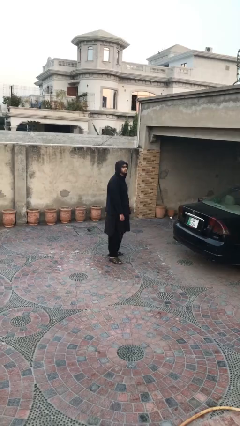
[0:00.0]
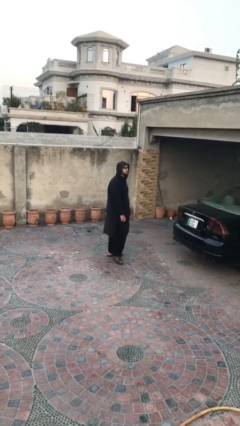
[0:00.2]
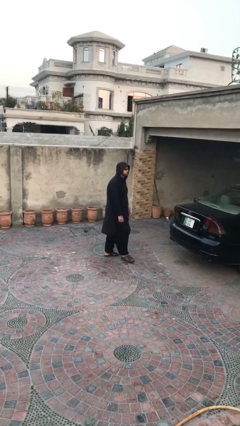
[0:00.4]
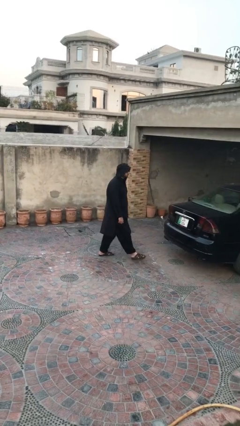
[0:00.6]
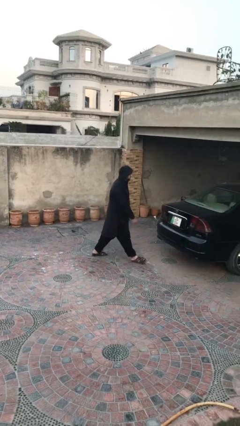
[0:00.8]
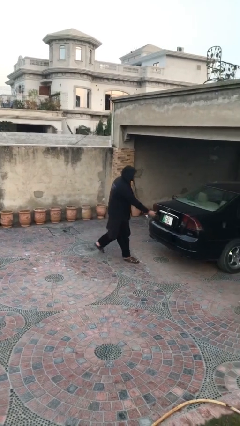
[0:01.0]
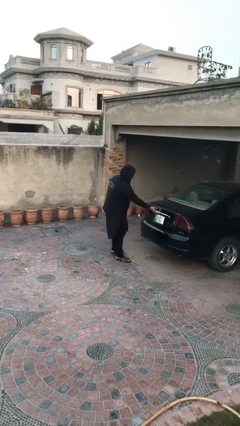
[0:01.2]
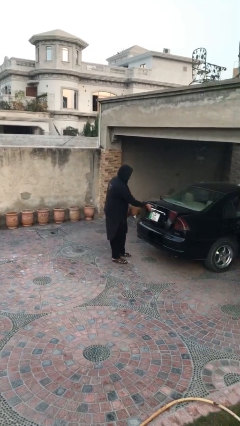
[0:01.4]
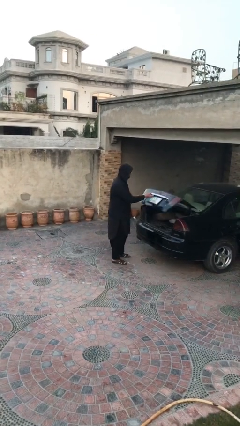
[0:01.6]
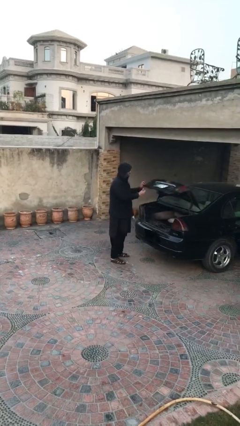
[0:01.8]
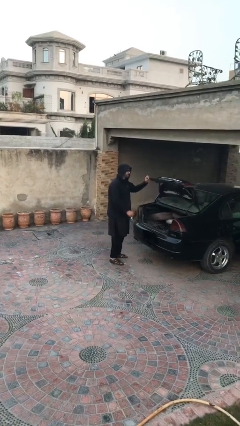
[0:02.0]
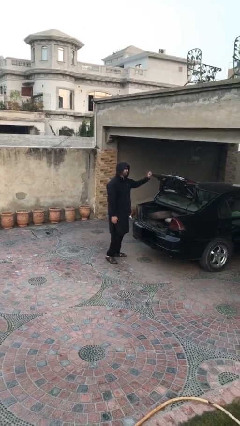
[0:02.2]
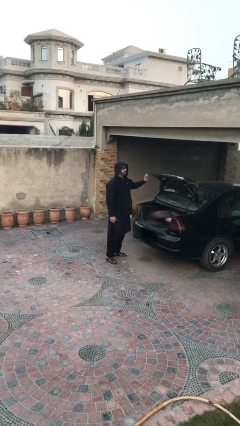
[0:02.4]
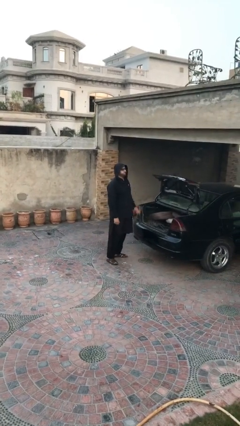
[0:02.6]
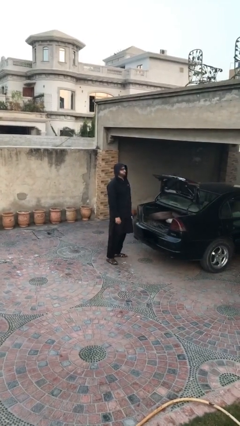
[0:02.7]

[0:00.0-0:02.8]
person opens car trunk

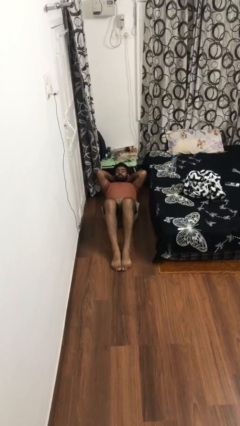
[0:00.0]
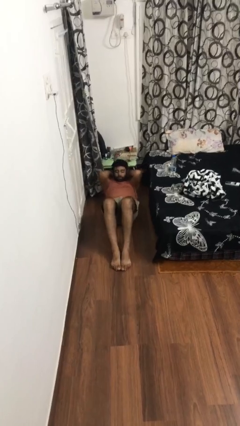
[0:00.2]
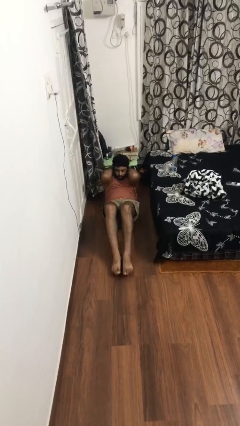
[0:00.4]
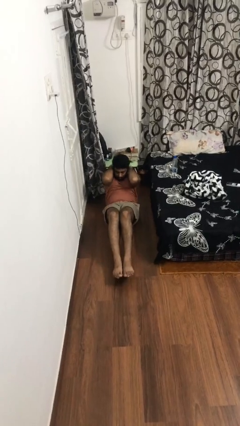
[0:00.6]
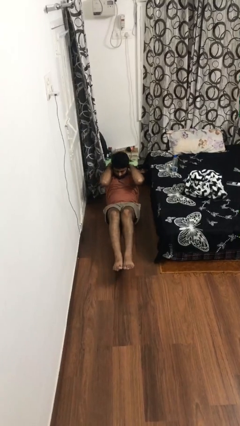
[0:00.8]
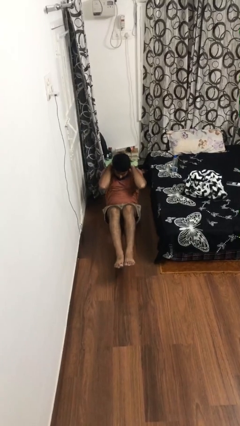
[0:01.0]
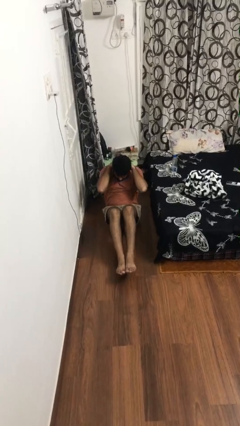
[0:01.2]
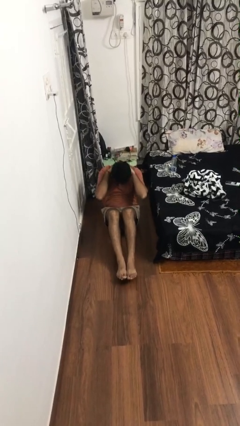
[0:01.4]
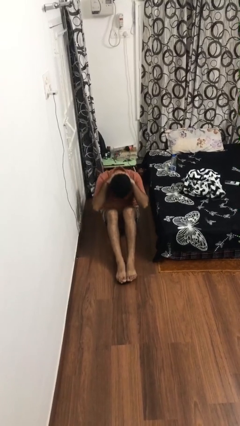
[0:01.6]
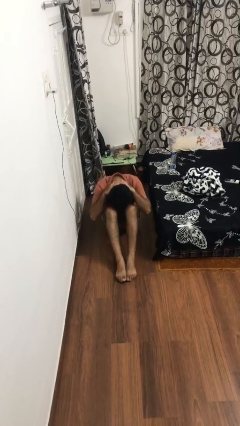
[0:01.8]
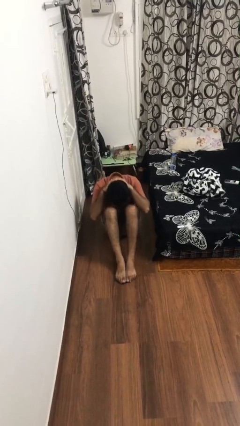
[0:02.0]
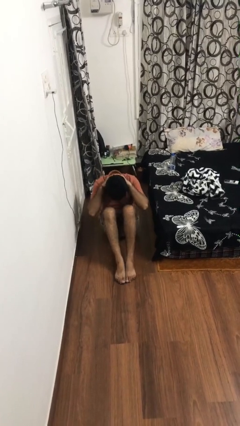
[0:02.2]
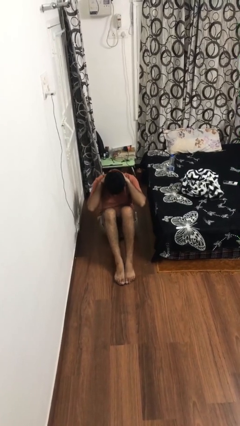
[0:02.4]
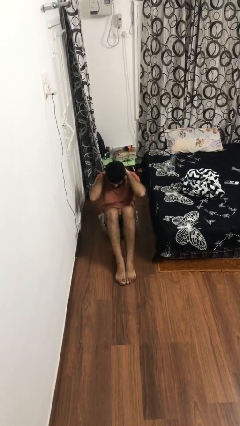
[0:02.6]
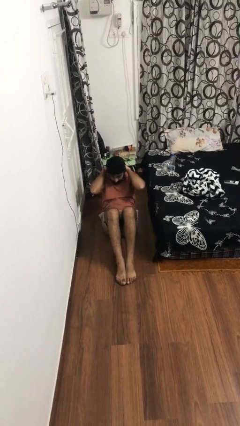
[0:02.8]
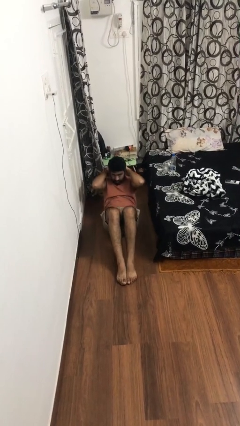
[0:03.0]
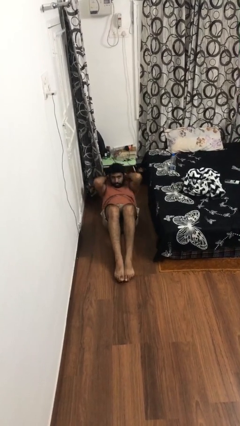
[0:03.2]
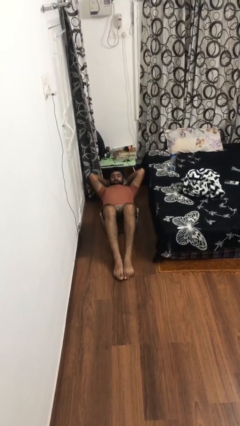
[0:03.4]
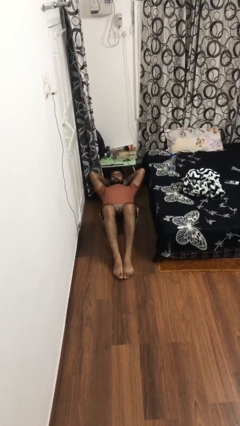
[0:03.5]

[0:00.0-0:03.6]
person exercises with situp

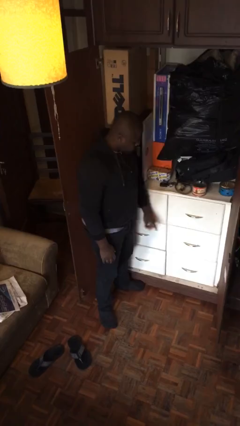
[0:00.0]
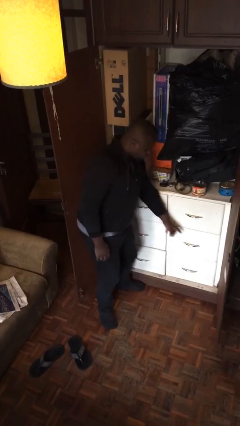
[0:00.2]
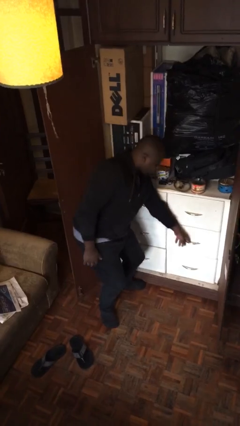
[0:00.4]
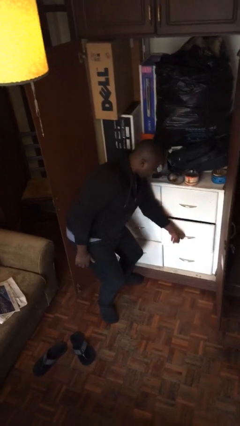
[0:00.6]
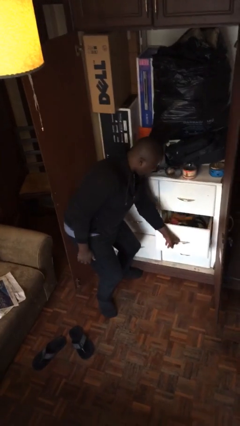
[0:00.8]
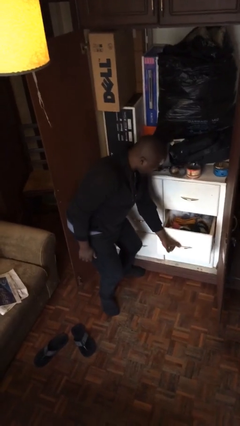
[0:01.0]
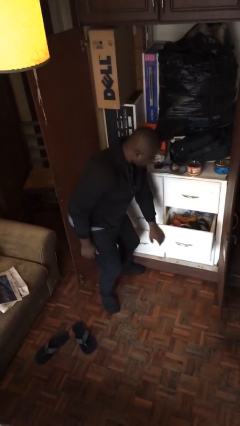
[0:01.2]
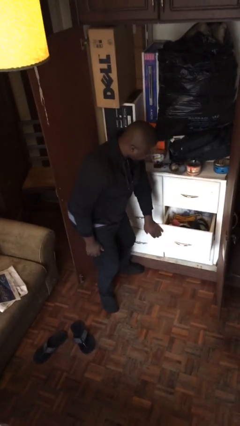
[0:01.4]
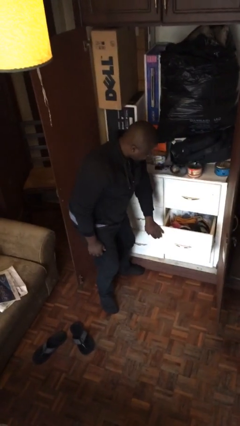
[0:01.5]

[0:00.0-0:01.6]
person opens dresser drawer

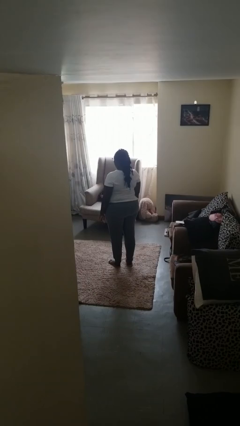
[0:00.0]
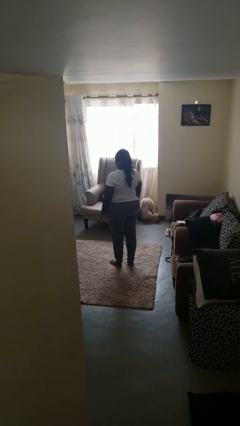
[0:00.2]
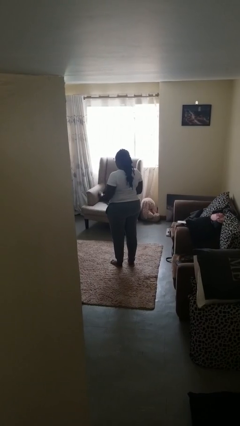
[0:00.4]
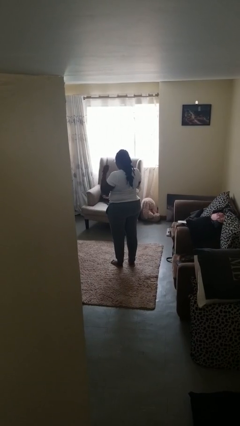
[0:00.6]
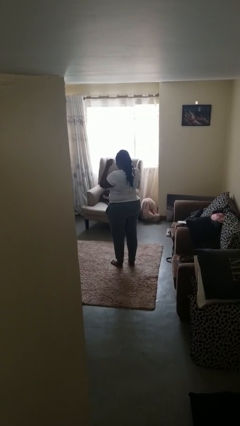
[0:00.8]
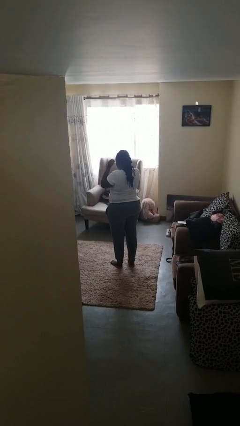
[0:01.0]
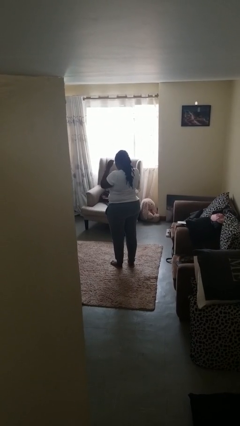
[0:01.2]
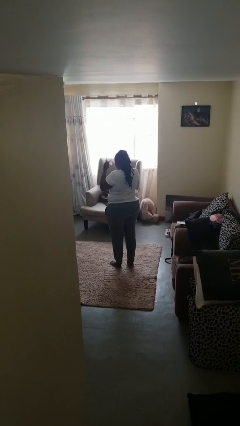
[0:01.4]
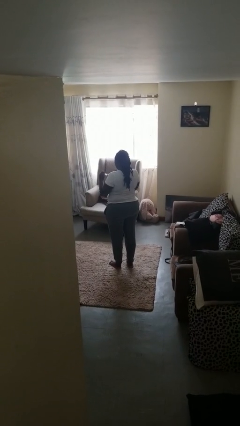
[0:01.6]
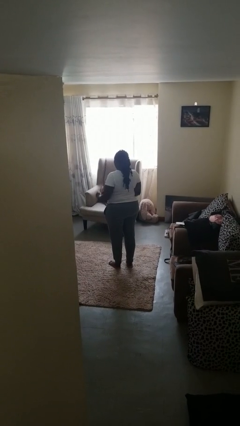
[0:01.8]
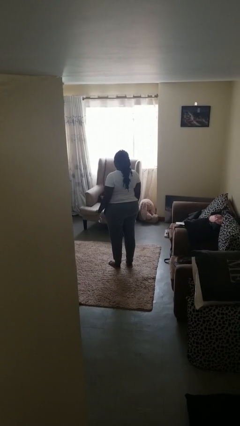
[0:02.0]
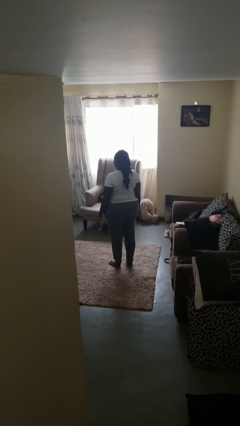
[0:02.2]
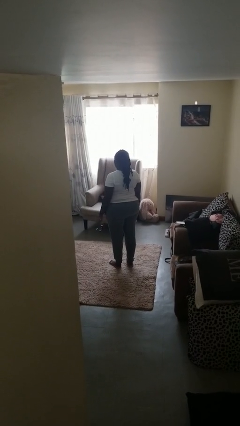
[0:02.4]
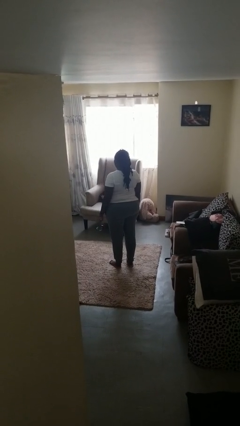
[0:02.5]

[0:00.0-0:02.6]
person takes off glasses

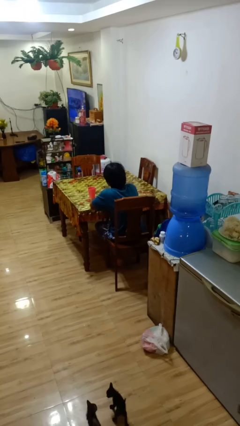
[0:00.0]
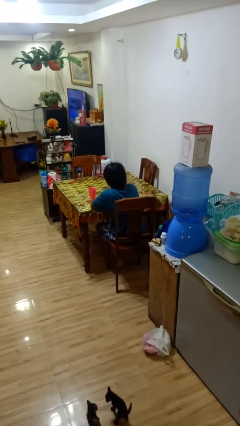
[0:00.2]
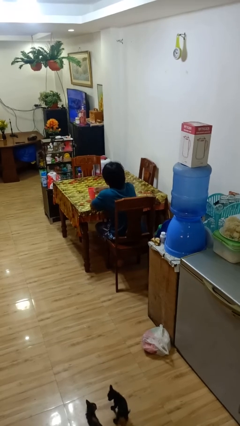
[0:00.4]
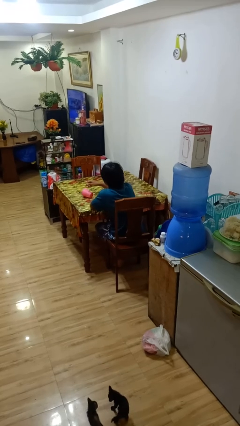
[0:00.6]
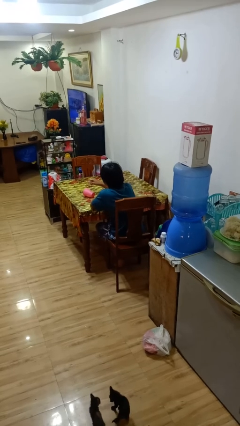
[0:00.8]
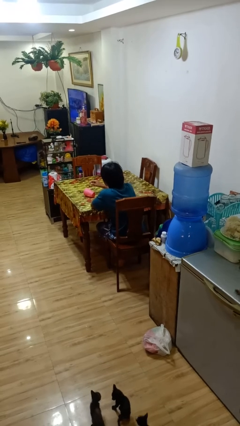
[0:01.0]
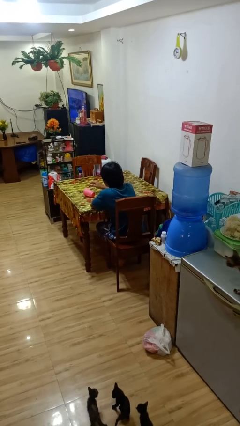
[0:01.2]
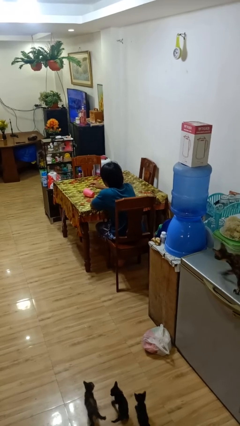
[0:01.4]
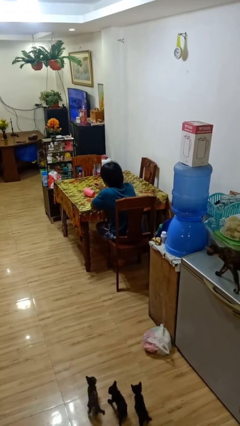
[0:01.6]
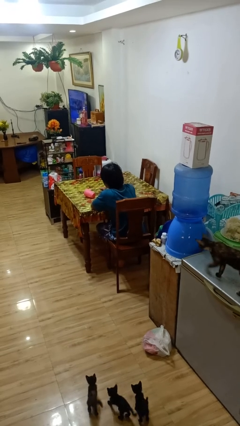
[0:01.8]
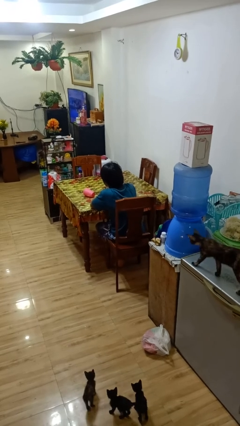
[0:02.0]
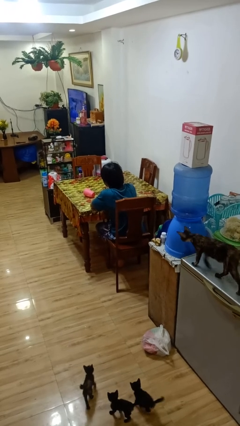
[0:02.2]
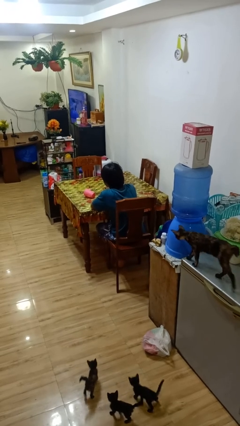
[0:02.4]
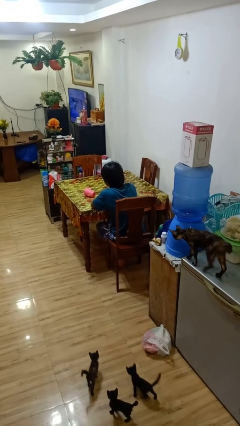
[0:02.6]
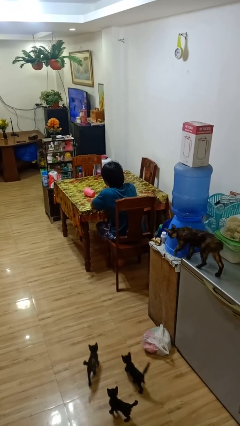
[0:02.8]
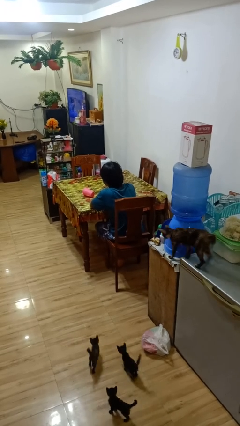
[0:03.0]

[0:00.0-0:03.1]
person spills on table

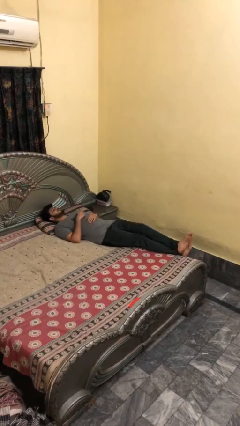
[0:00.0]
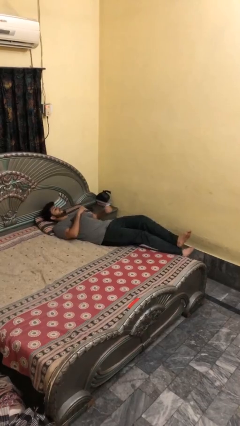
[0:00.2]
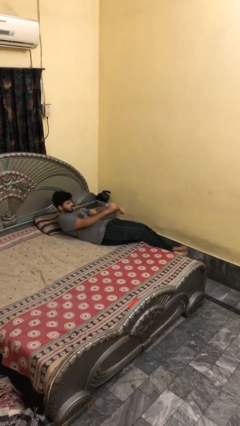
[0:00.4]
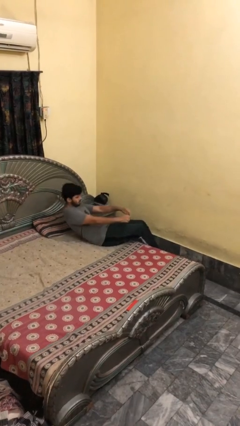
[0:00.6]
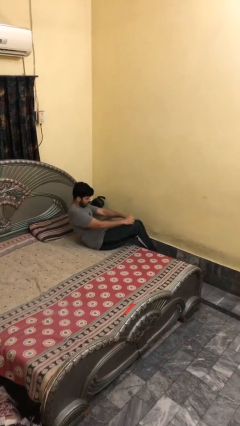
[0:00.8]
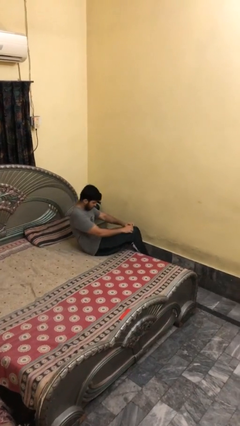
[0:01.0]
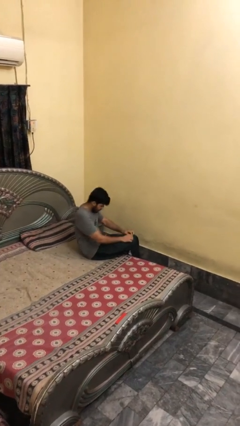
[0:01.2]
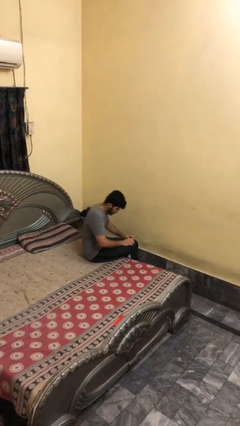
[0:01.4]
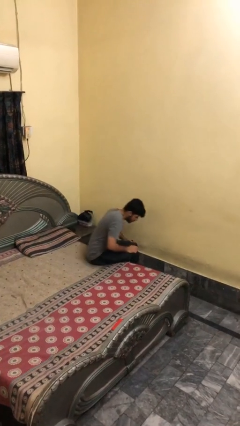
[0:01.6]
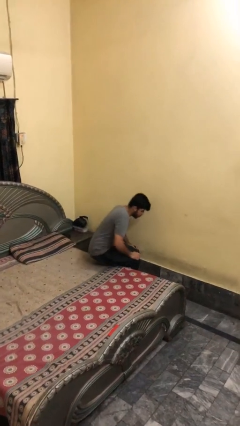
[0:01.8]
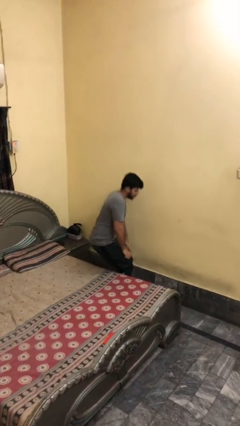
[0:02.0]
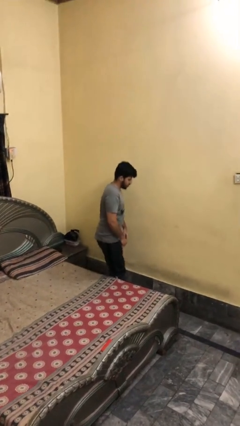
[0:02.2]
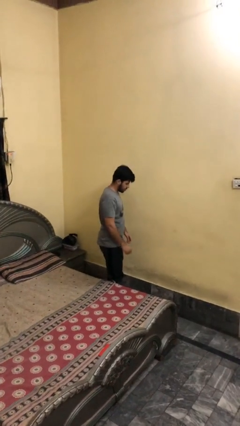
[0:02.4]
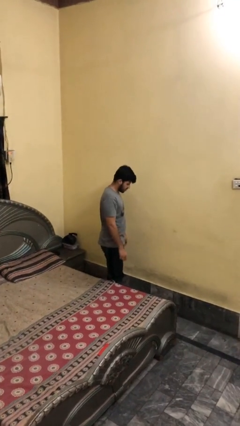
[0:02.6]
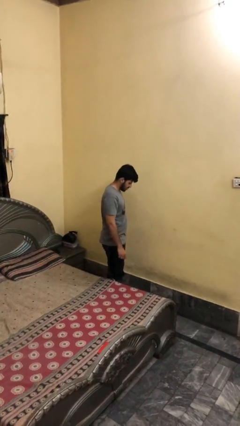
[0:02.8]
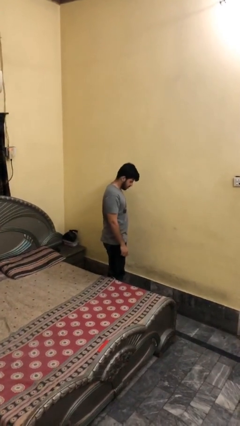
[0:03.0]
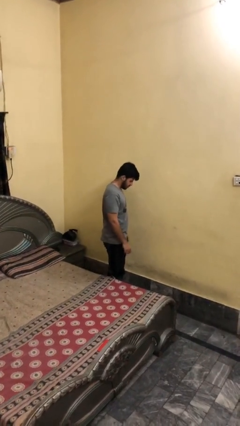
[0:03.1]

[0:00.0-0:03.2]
person stands up

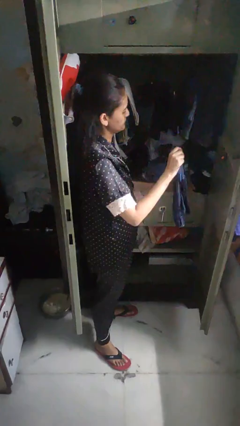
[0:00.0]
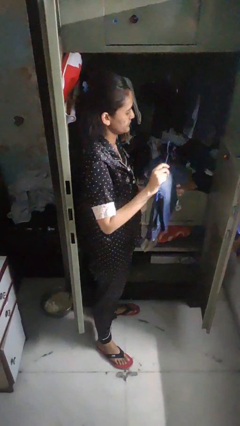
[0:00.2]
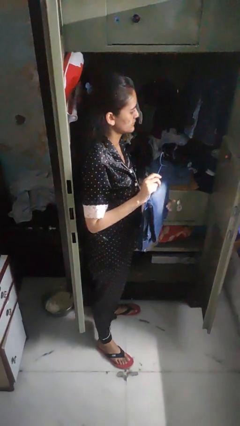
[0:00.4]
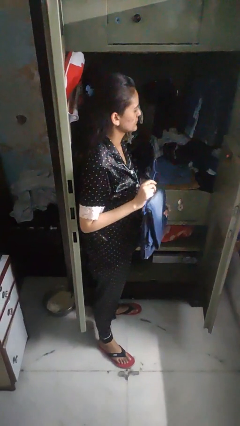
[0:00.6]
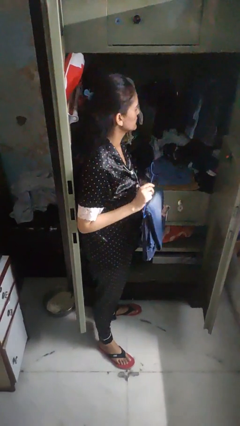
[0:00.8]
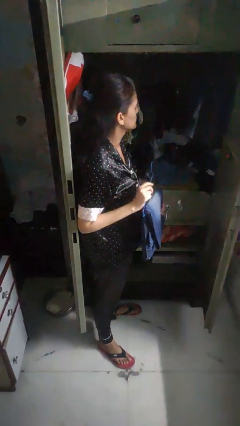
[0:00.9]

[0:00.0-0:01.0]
person takes clothes from closet
